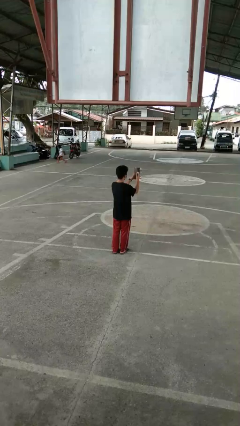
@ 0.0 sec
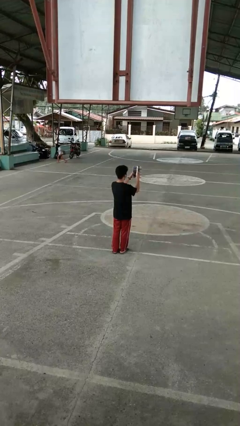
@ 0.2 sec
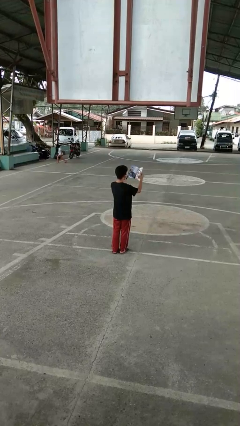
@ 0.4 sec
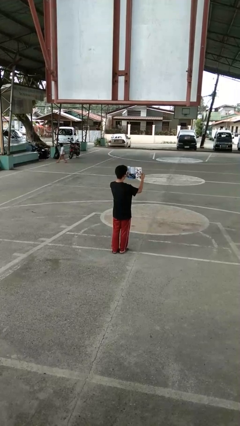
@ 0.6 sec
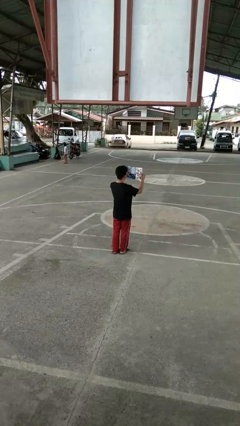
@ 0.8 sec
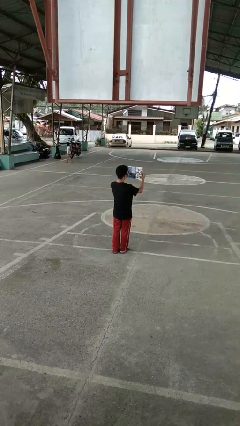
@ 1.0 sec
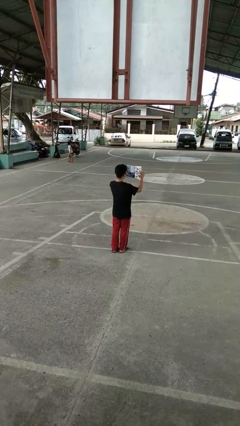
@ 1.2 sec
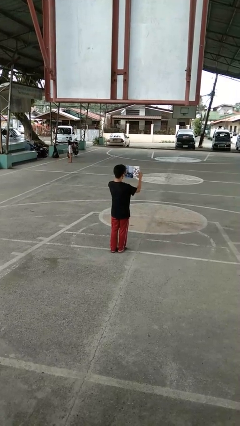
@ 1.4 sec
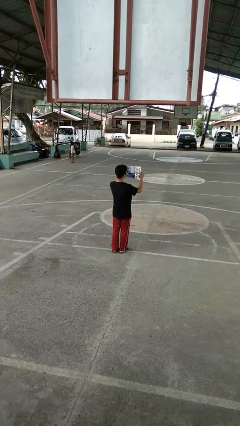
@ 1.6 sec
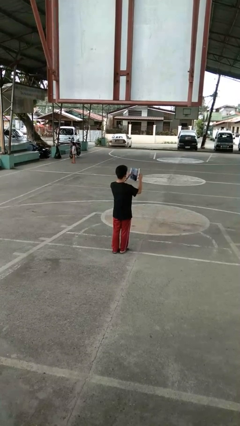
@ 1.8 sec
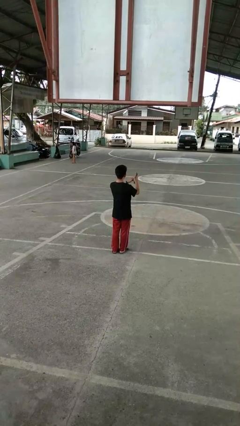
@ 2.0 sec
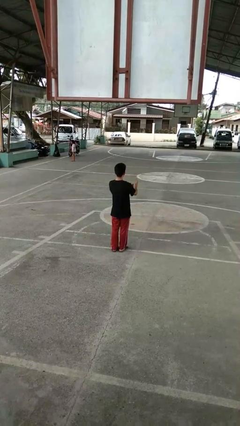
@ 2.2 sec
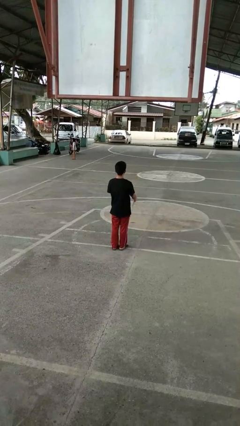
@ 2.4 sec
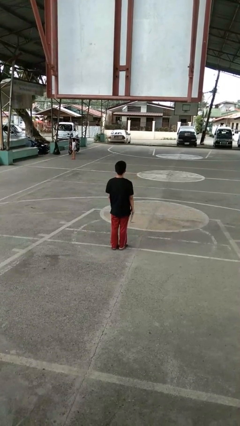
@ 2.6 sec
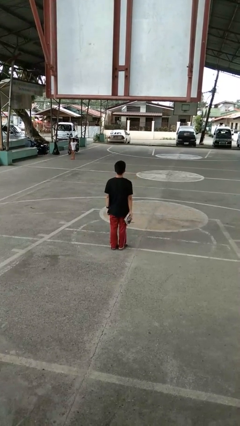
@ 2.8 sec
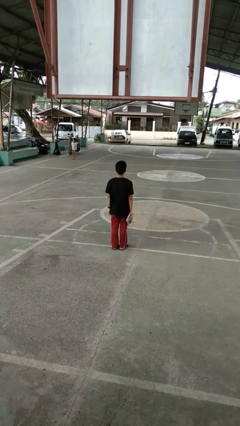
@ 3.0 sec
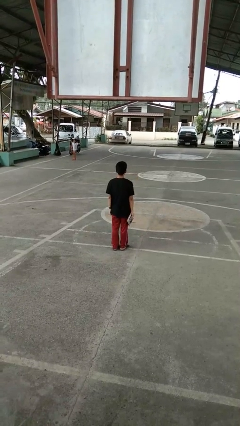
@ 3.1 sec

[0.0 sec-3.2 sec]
person reads magazine

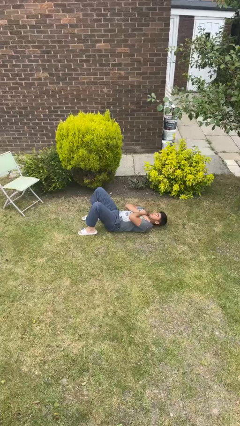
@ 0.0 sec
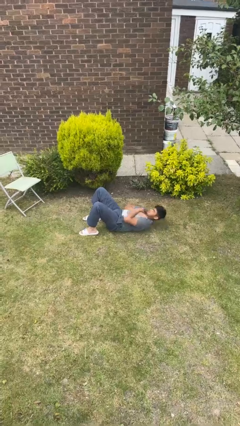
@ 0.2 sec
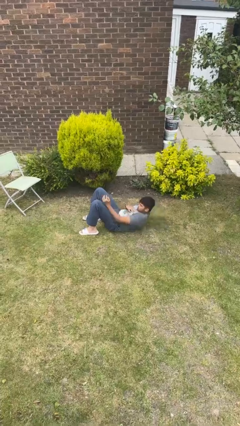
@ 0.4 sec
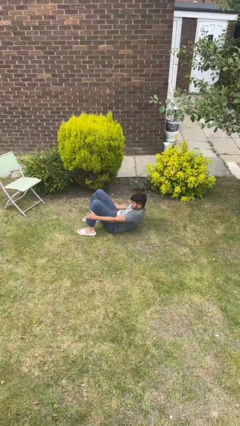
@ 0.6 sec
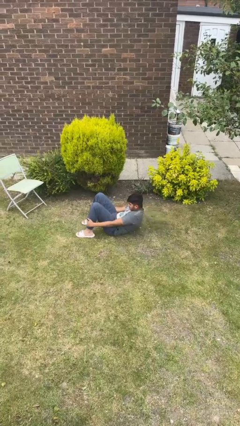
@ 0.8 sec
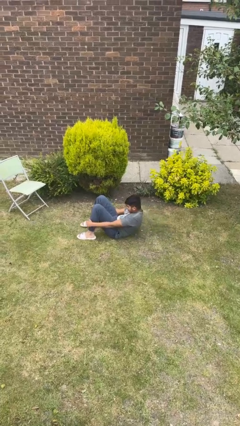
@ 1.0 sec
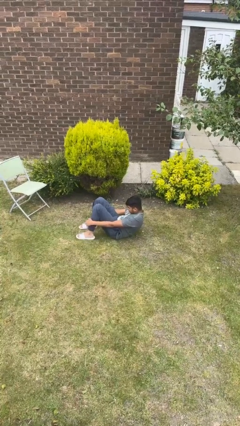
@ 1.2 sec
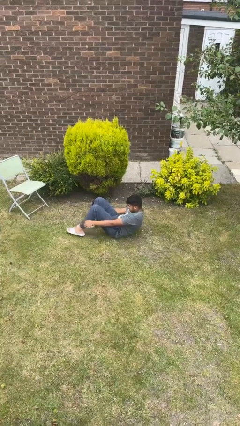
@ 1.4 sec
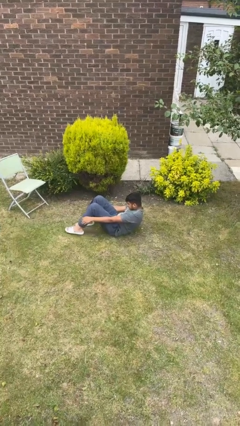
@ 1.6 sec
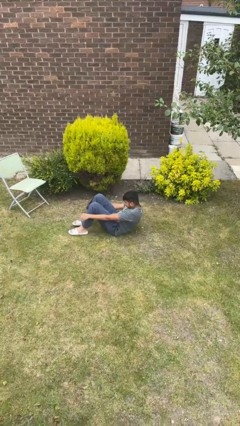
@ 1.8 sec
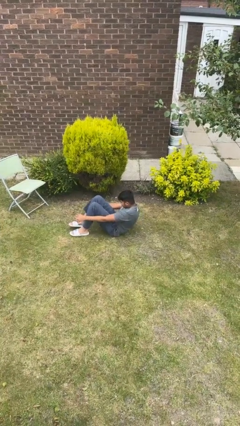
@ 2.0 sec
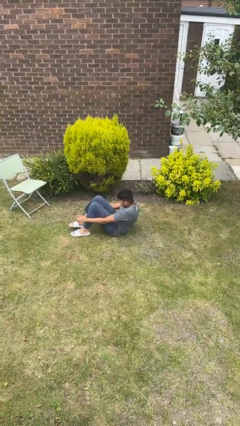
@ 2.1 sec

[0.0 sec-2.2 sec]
person exercises with situp

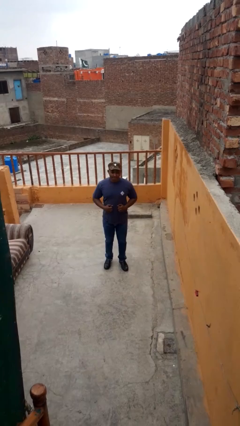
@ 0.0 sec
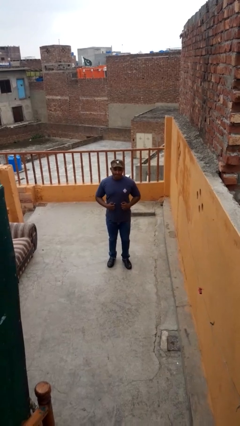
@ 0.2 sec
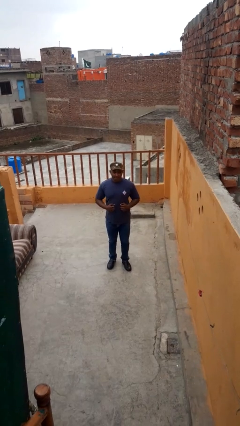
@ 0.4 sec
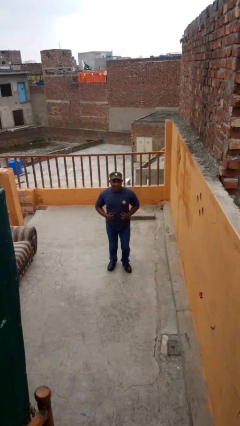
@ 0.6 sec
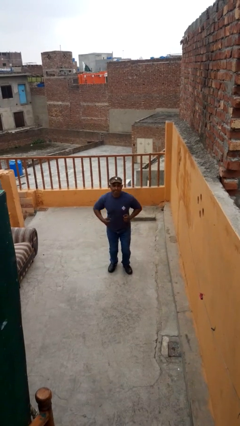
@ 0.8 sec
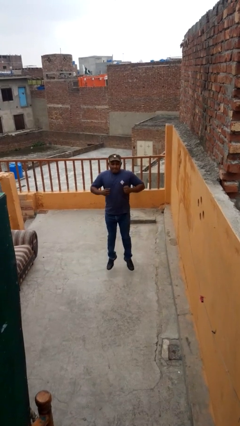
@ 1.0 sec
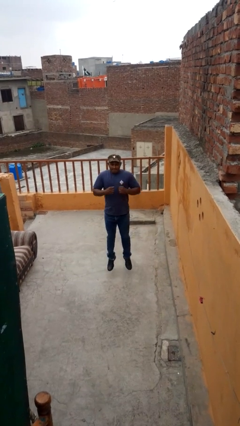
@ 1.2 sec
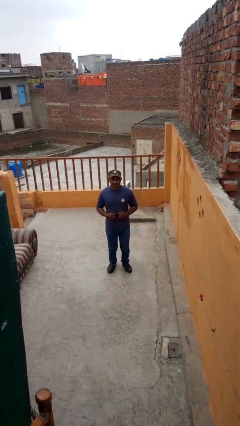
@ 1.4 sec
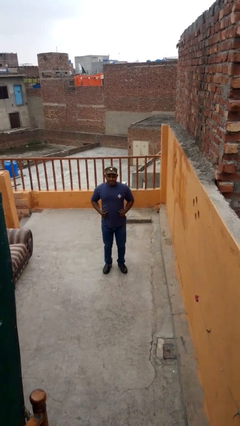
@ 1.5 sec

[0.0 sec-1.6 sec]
person jumps

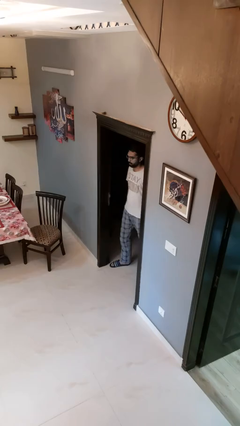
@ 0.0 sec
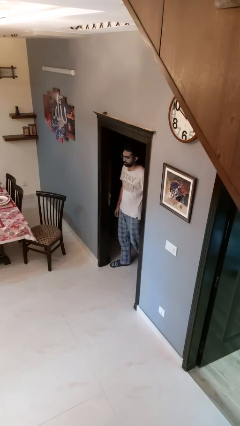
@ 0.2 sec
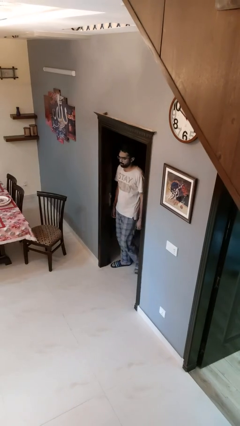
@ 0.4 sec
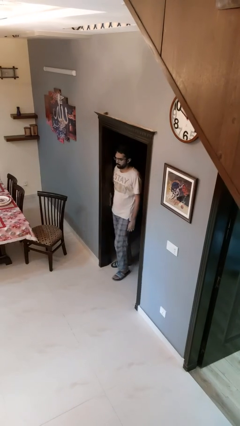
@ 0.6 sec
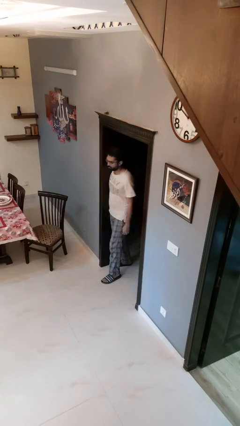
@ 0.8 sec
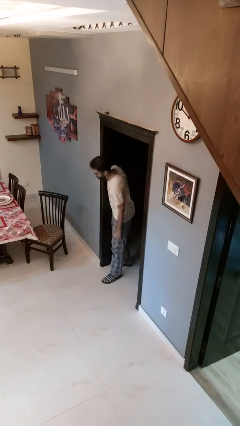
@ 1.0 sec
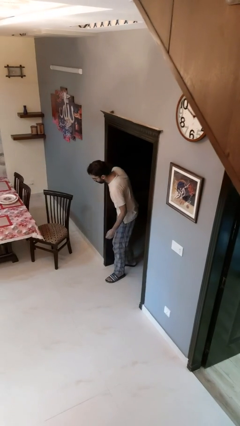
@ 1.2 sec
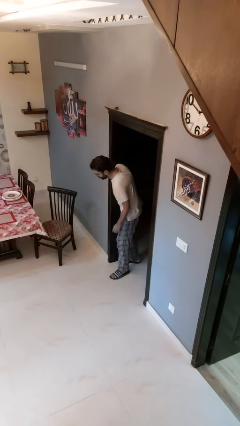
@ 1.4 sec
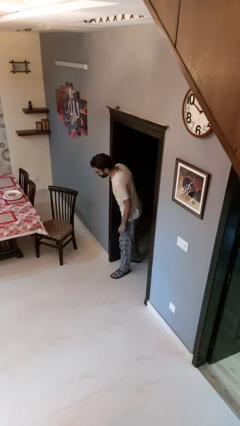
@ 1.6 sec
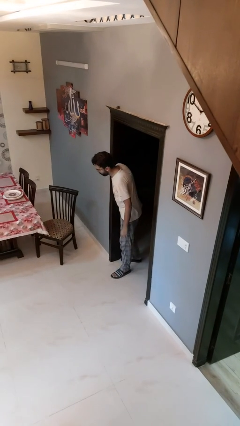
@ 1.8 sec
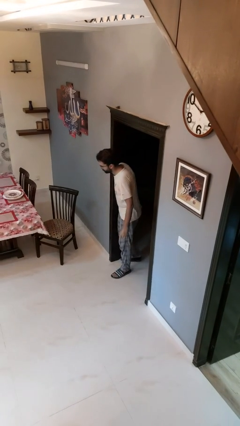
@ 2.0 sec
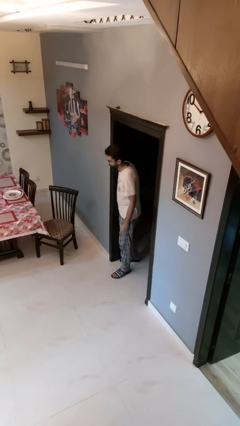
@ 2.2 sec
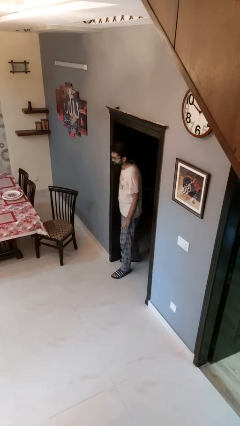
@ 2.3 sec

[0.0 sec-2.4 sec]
person bumps into wall

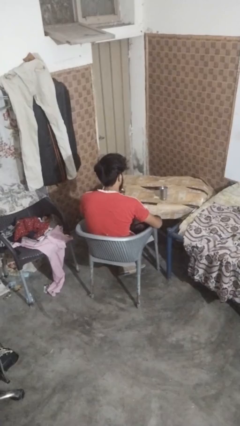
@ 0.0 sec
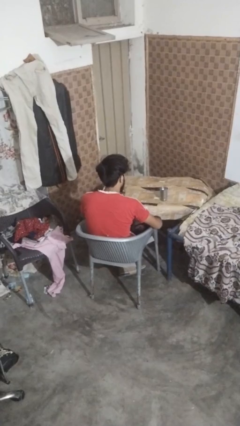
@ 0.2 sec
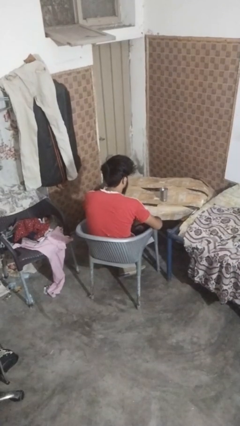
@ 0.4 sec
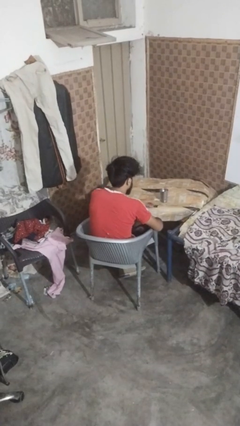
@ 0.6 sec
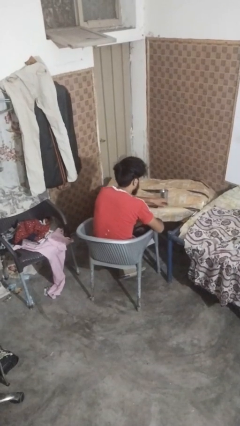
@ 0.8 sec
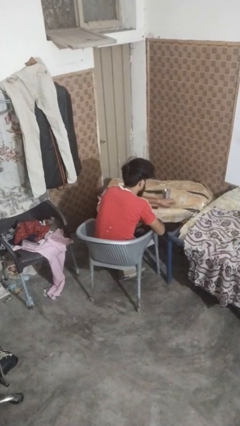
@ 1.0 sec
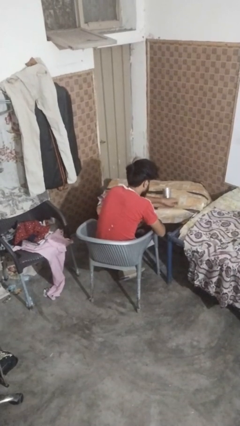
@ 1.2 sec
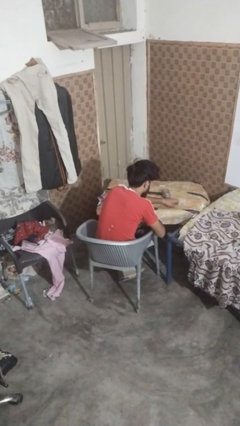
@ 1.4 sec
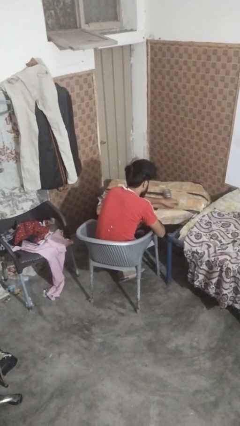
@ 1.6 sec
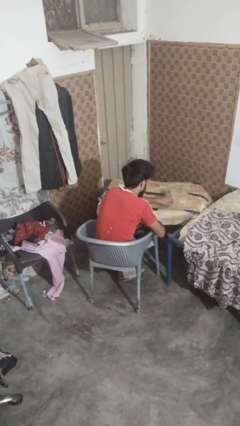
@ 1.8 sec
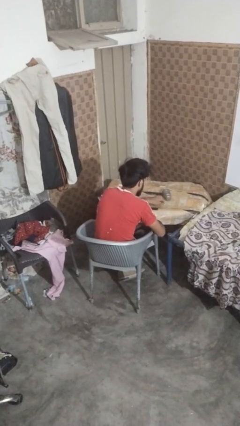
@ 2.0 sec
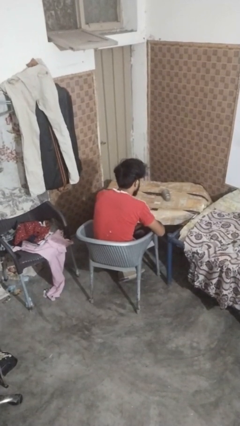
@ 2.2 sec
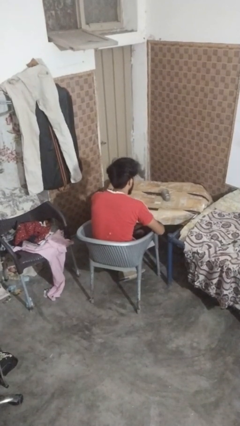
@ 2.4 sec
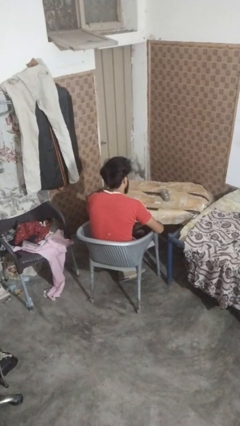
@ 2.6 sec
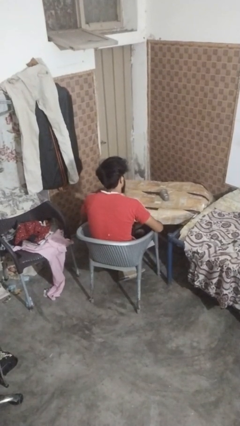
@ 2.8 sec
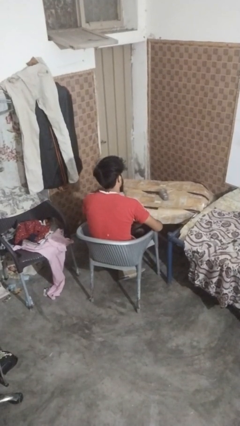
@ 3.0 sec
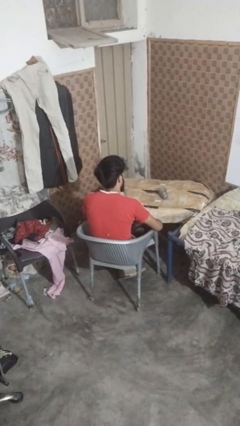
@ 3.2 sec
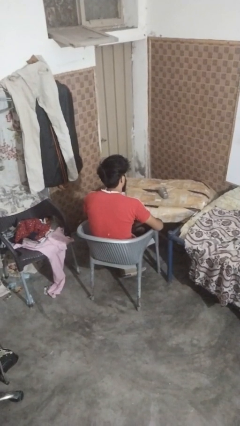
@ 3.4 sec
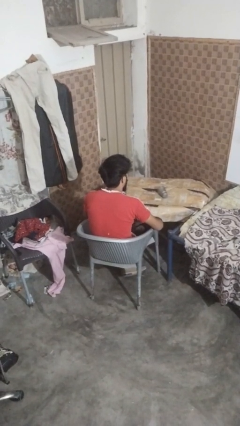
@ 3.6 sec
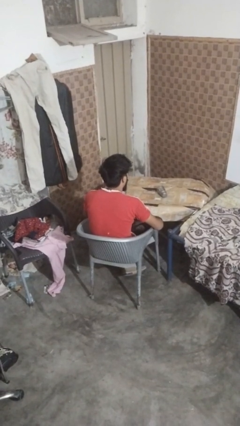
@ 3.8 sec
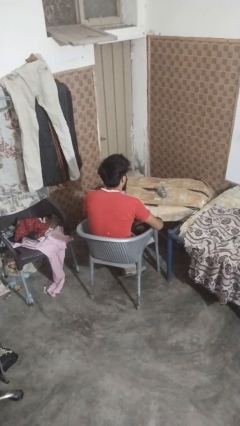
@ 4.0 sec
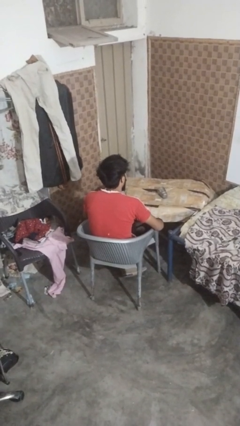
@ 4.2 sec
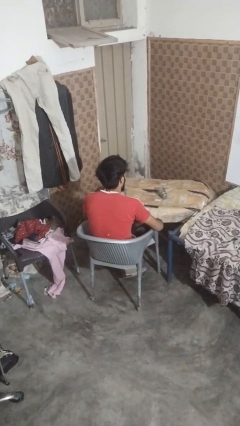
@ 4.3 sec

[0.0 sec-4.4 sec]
person knocks over glass

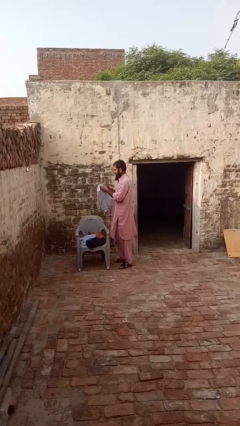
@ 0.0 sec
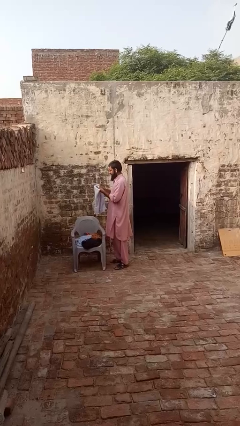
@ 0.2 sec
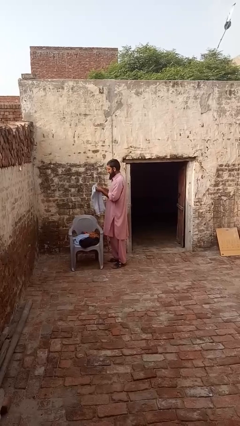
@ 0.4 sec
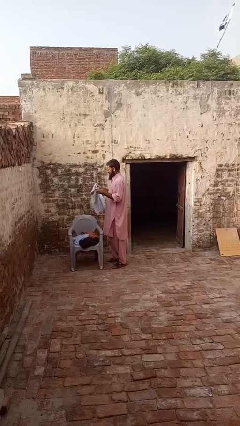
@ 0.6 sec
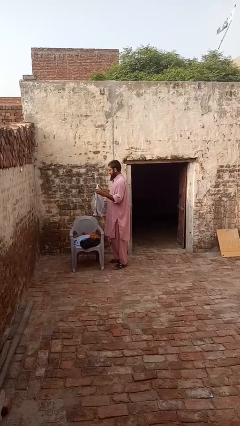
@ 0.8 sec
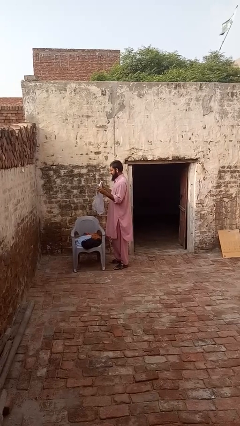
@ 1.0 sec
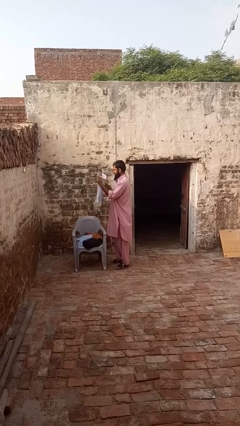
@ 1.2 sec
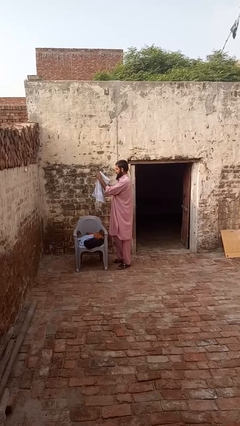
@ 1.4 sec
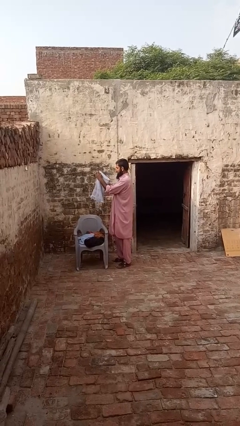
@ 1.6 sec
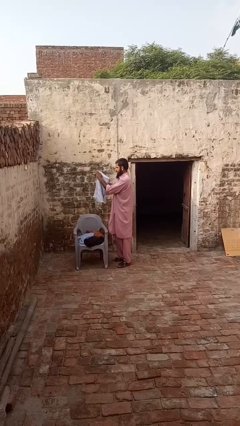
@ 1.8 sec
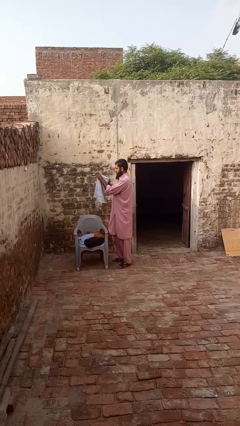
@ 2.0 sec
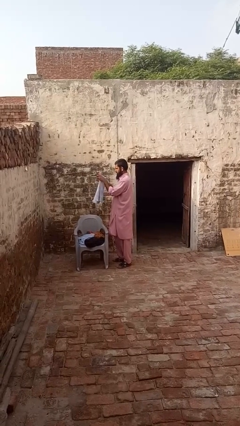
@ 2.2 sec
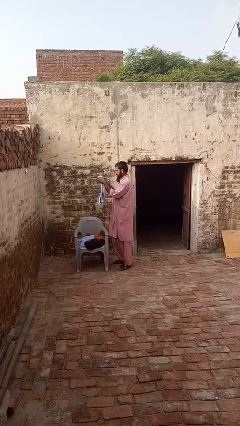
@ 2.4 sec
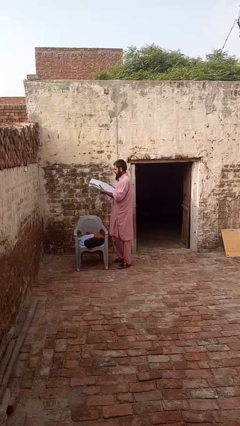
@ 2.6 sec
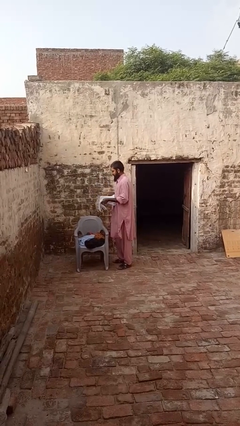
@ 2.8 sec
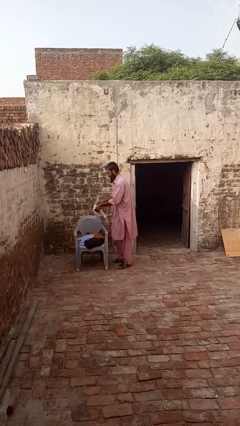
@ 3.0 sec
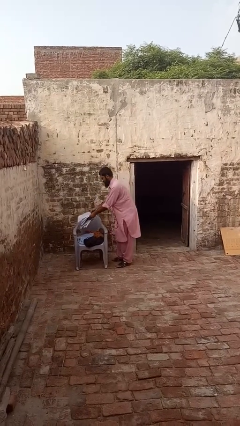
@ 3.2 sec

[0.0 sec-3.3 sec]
person folds towel

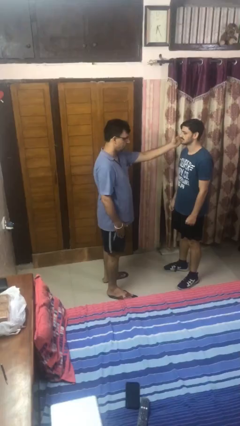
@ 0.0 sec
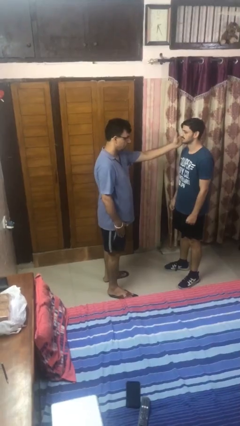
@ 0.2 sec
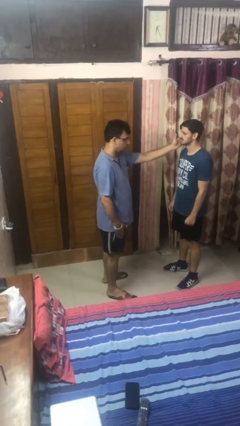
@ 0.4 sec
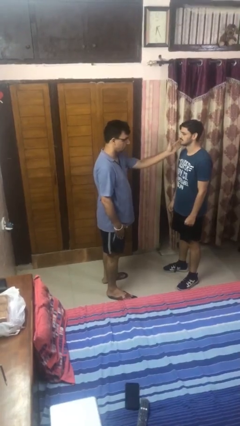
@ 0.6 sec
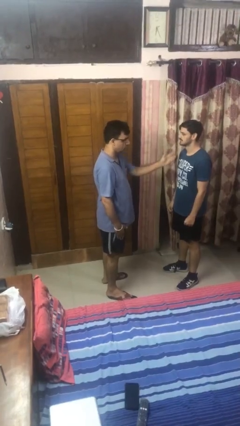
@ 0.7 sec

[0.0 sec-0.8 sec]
person touches face of person
